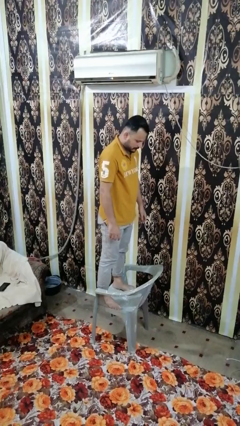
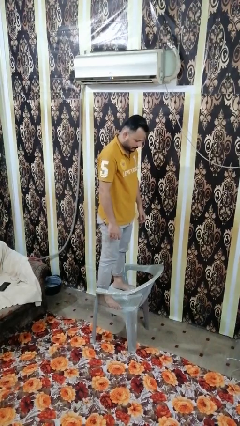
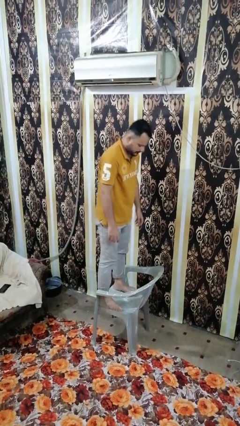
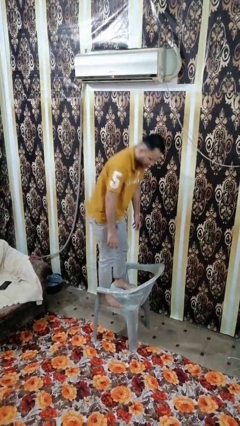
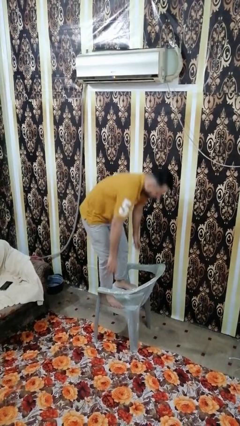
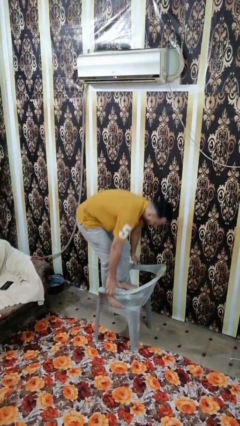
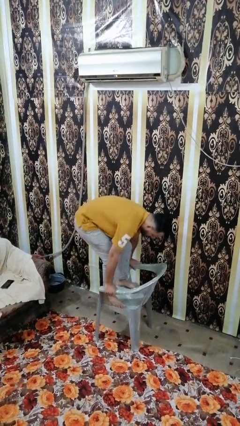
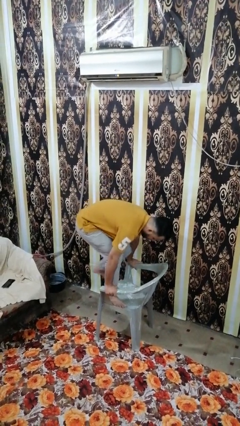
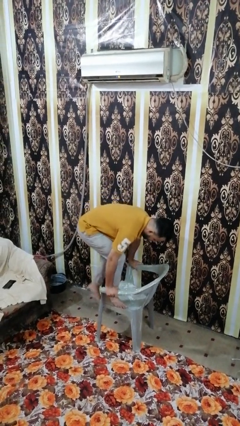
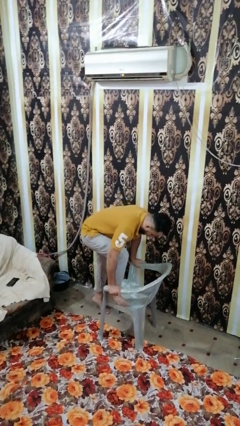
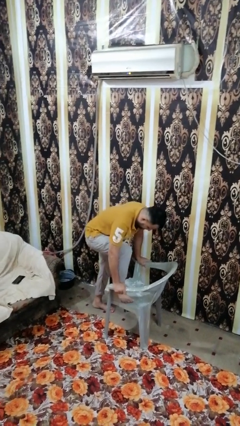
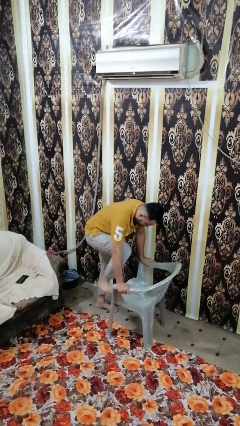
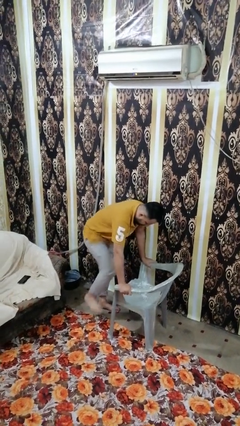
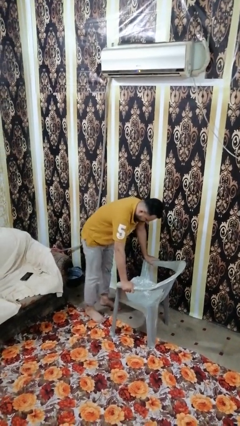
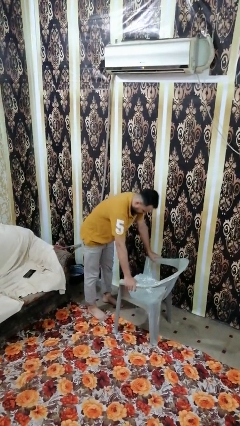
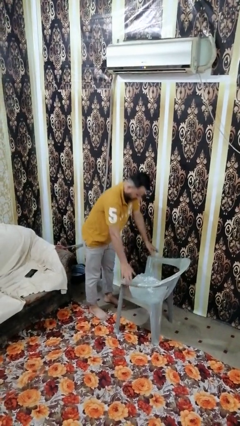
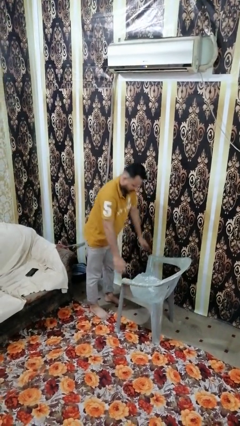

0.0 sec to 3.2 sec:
person climbs off chair

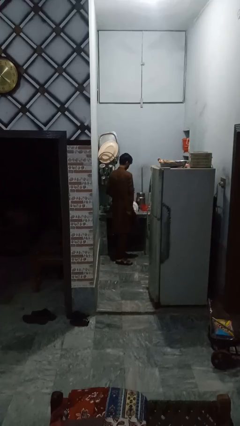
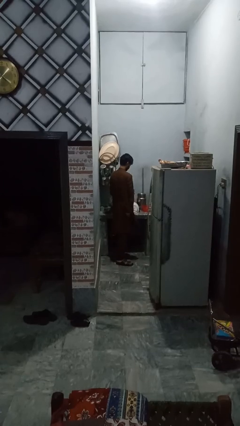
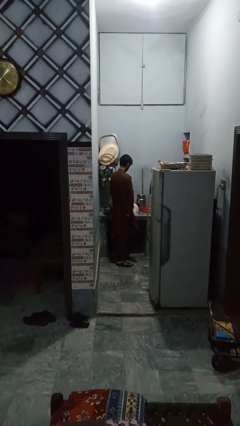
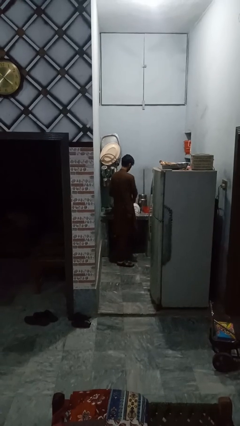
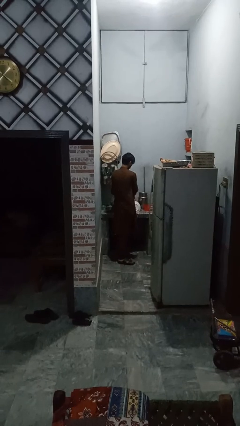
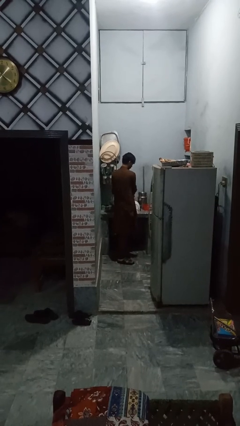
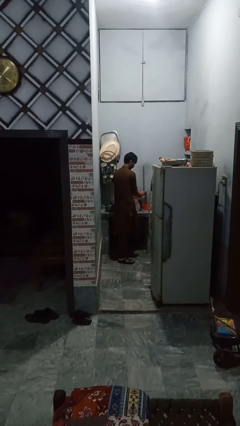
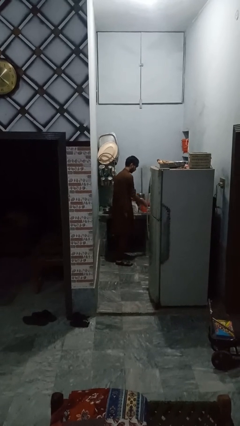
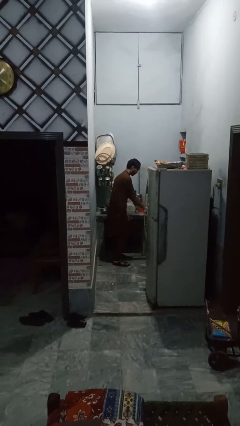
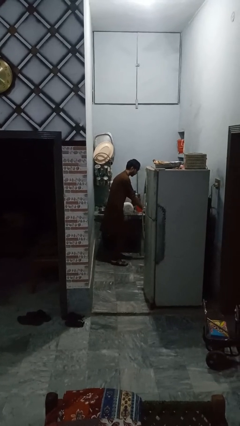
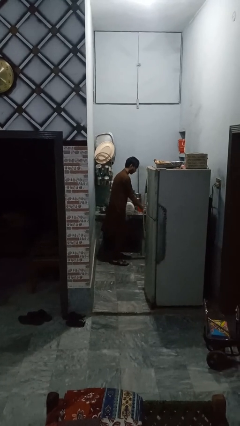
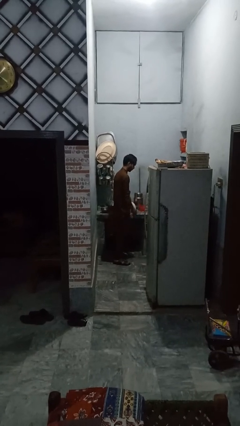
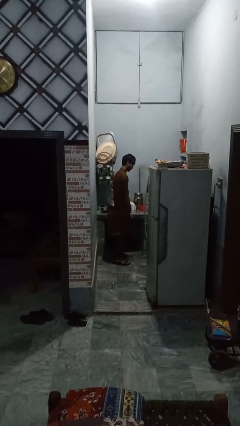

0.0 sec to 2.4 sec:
person unloads dishwasher

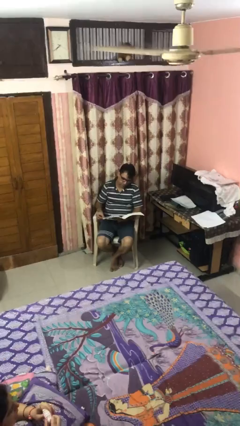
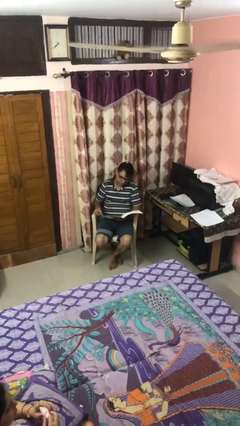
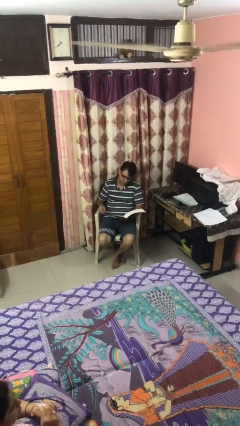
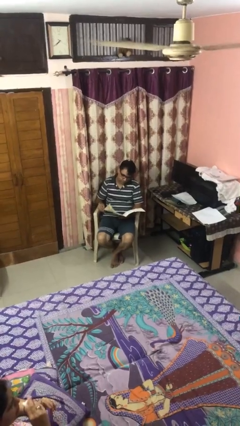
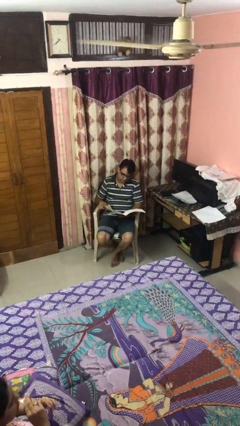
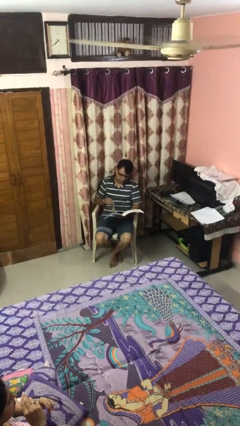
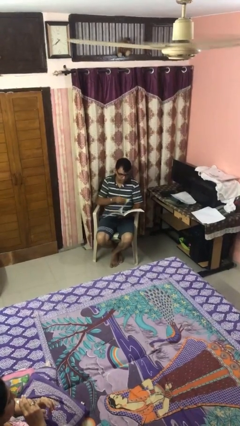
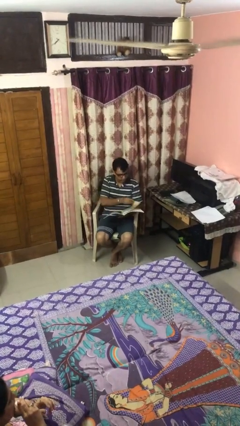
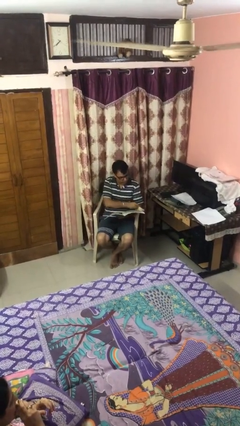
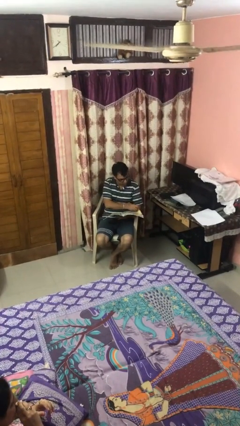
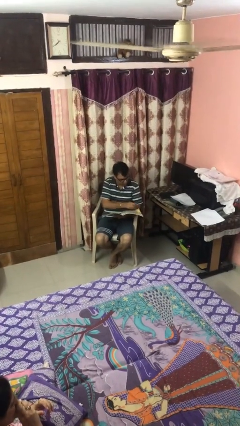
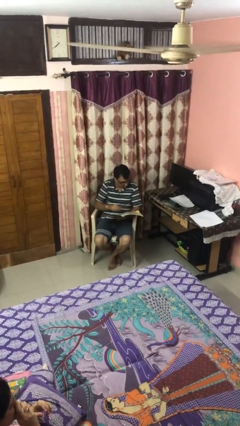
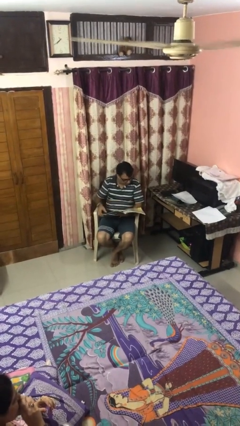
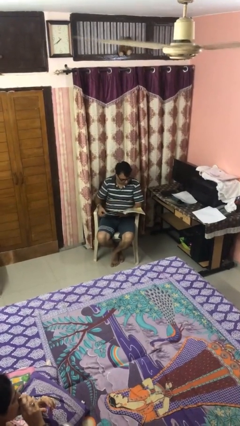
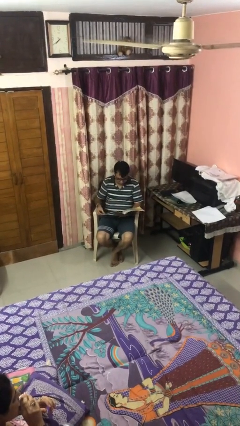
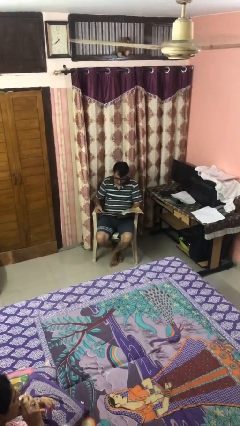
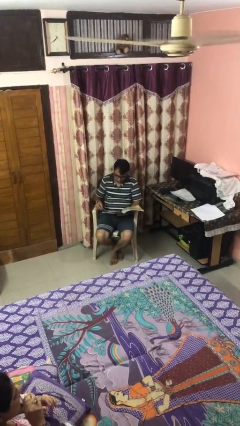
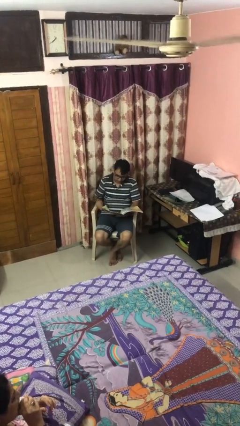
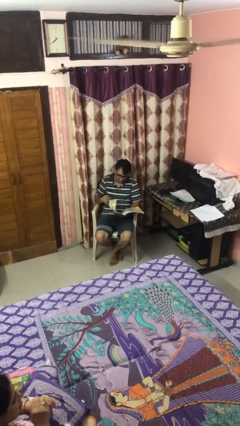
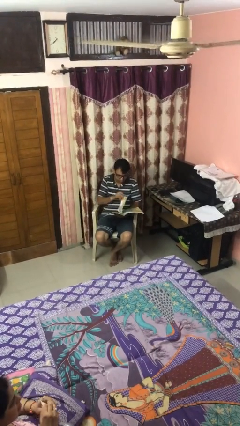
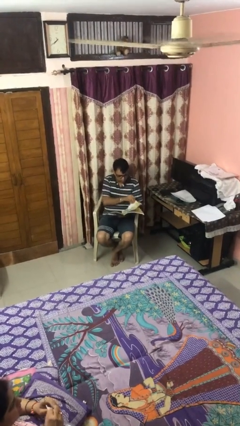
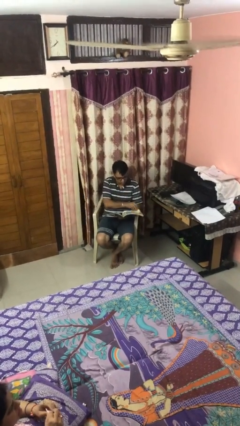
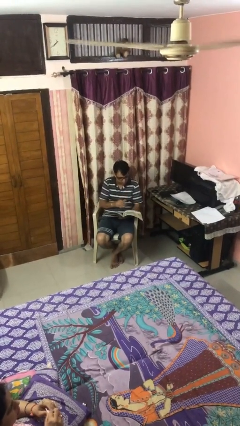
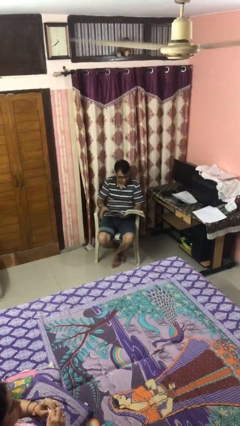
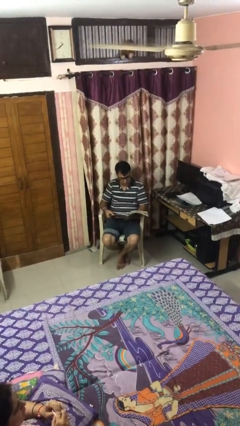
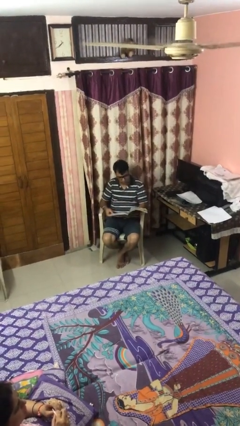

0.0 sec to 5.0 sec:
person reads magazine

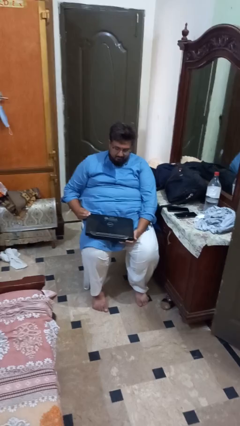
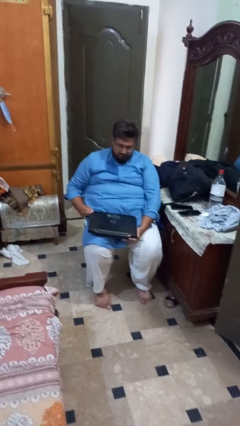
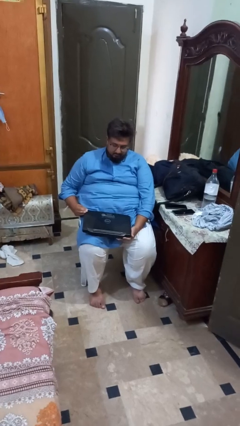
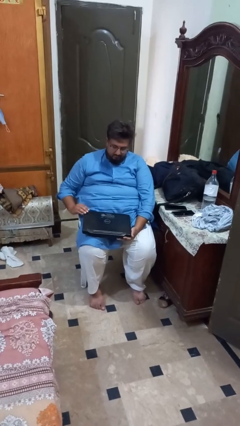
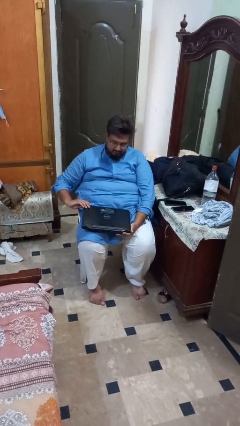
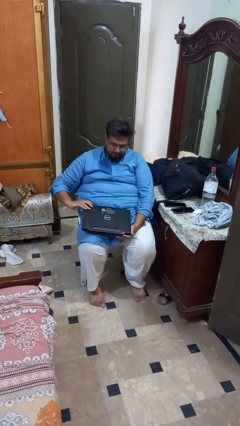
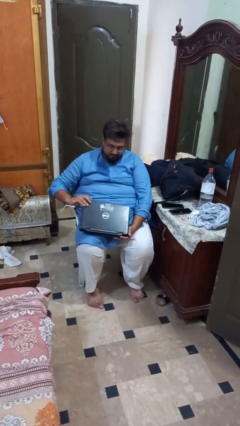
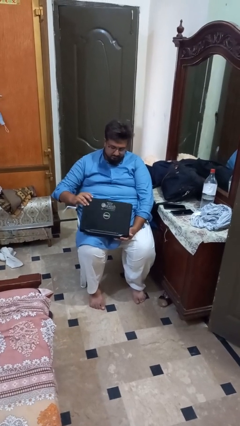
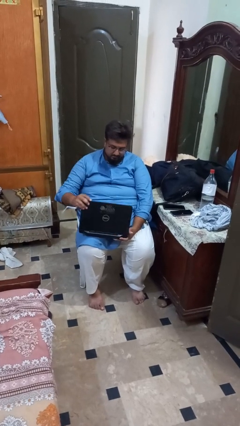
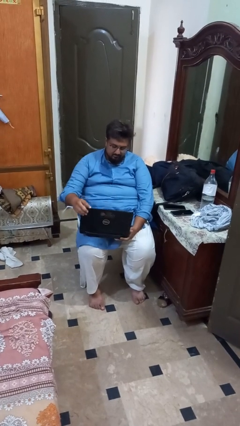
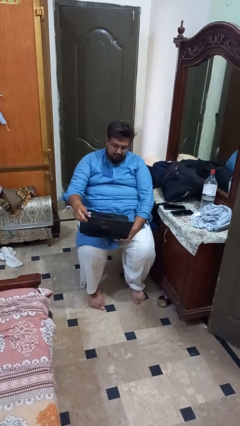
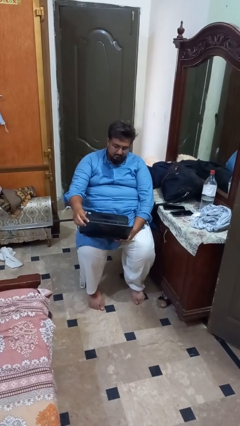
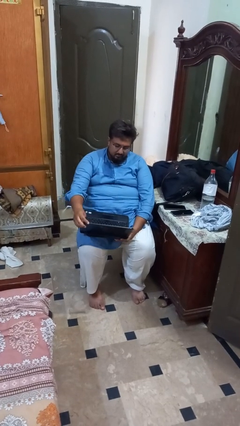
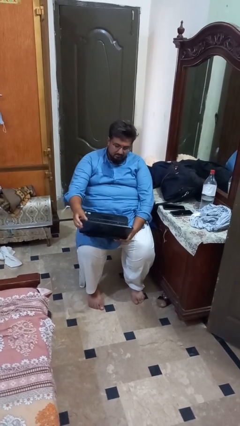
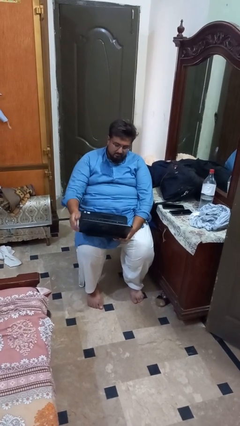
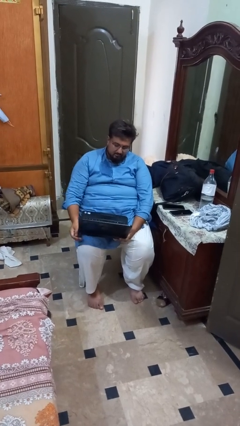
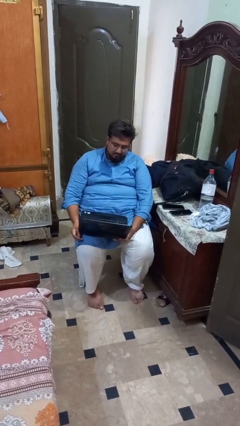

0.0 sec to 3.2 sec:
person opens laptop

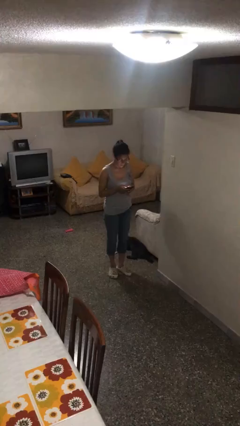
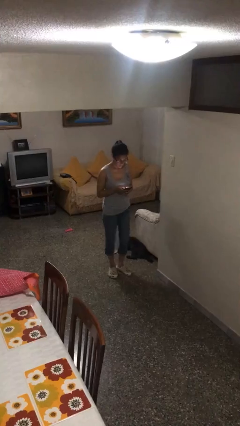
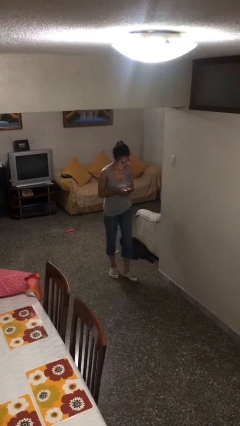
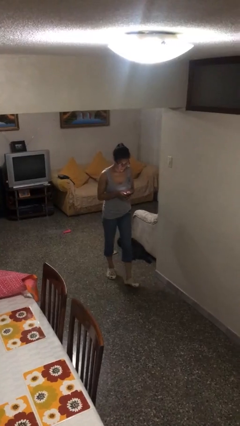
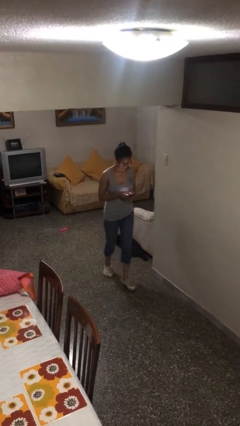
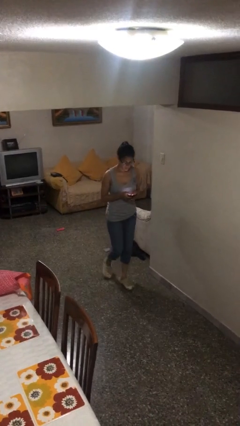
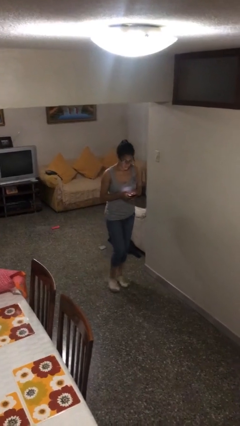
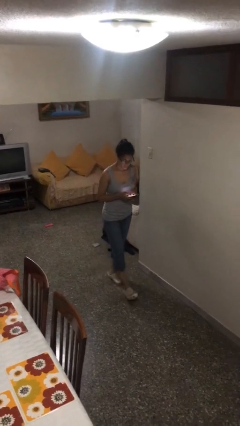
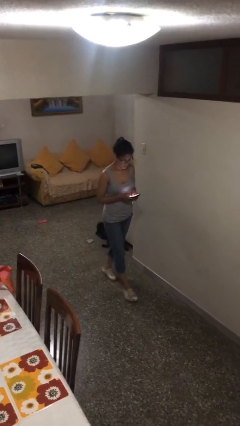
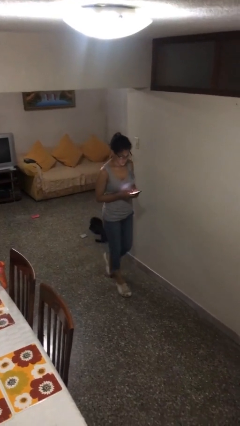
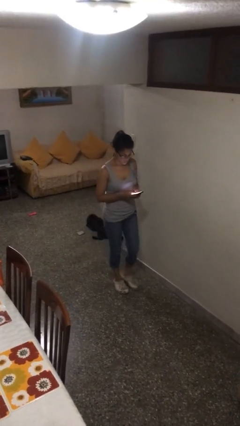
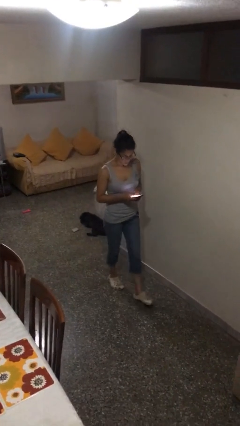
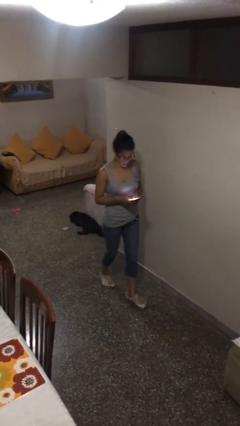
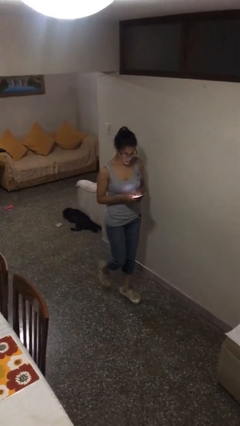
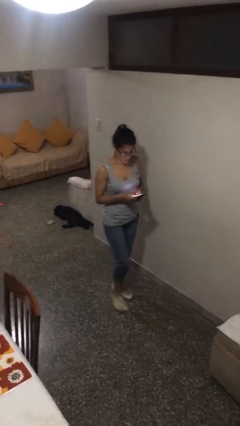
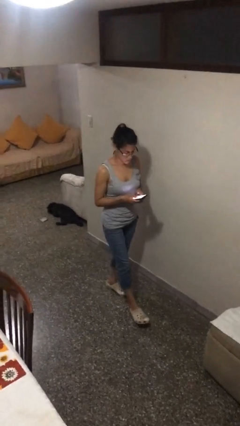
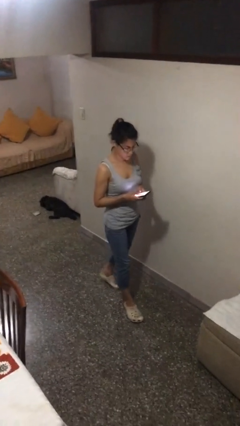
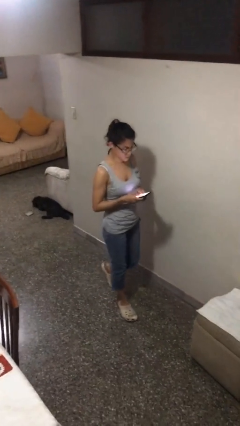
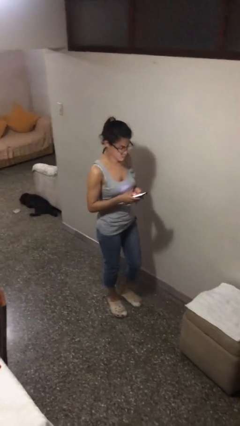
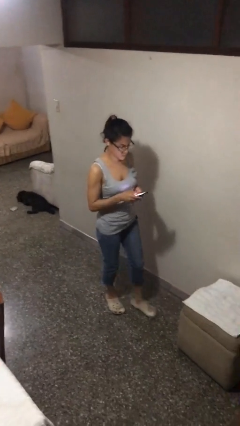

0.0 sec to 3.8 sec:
person texts on phone

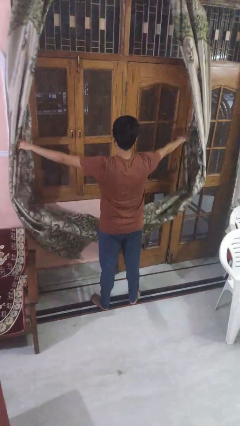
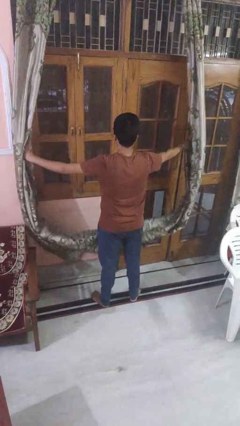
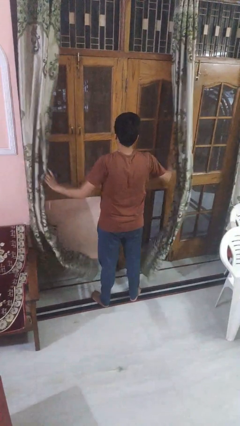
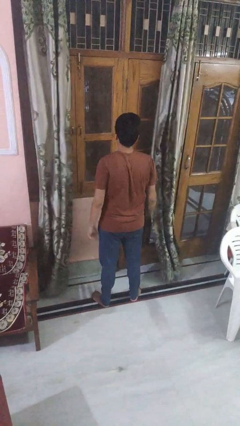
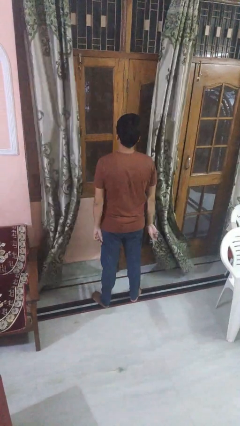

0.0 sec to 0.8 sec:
person opens curtains
